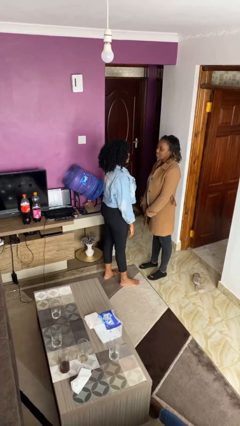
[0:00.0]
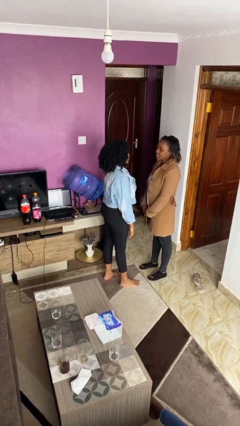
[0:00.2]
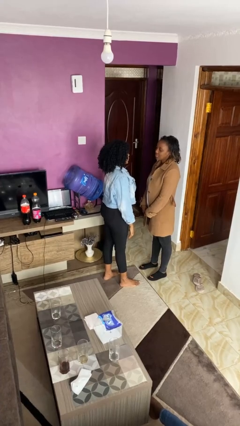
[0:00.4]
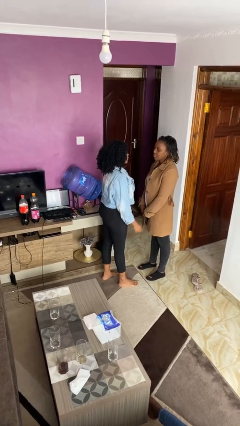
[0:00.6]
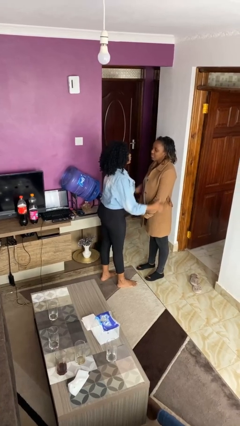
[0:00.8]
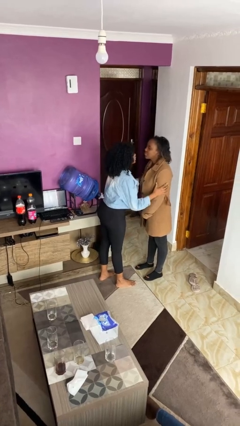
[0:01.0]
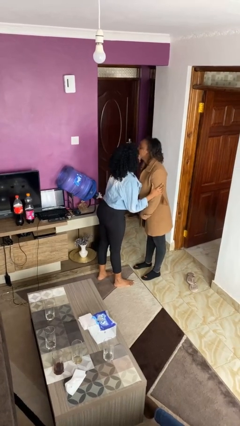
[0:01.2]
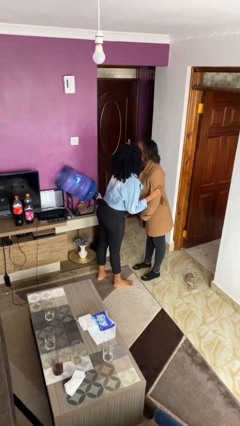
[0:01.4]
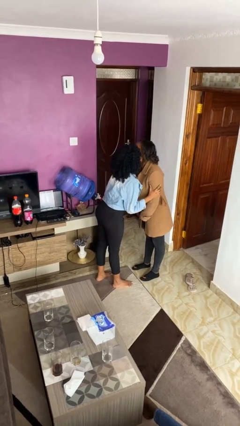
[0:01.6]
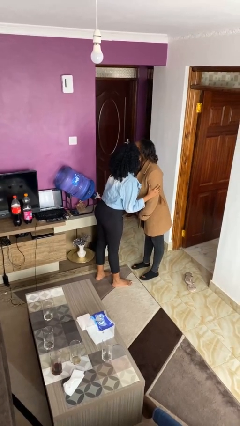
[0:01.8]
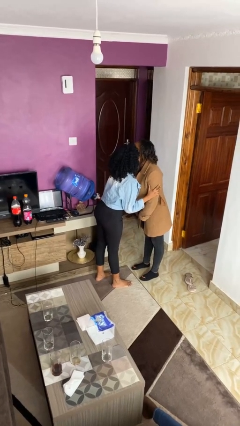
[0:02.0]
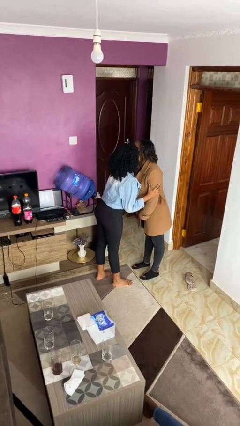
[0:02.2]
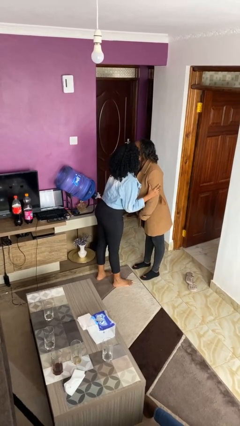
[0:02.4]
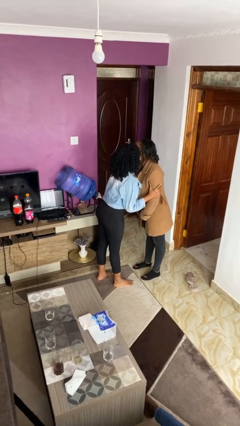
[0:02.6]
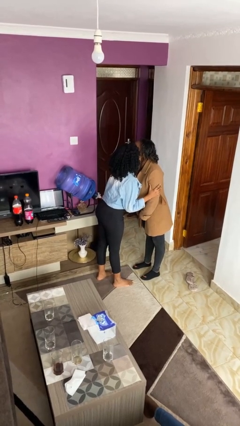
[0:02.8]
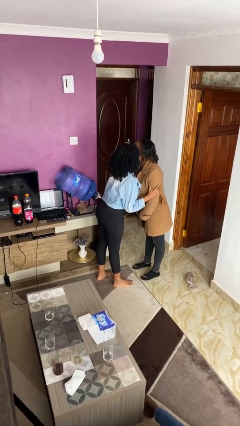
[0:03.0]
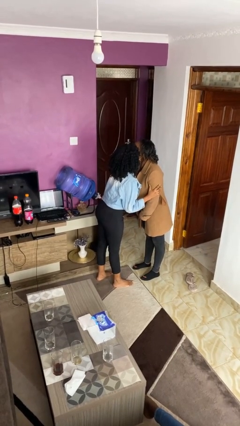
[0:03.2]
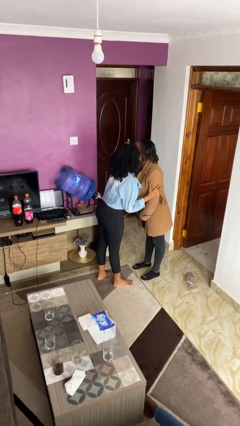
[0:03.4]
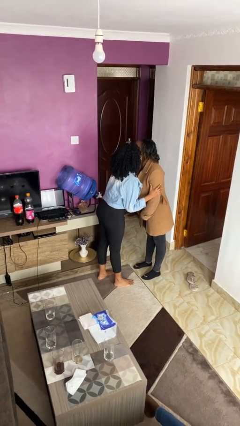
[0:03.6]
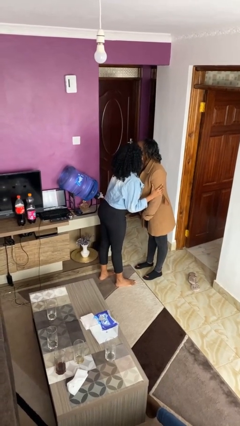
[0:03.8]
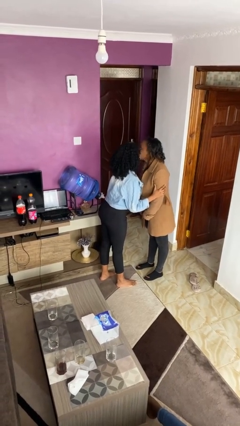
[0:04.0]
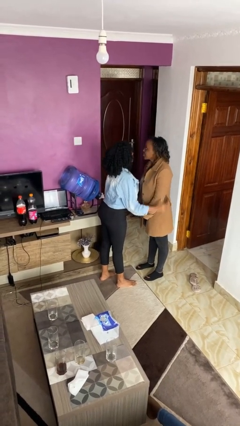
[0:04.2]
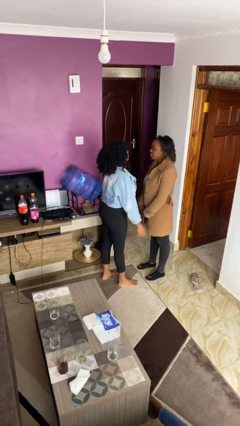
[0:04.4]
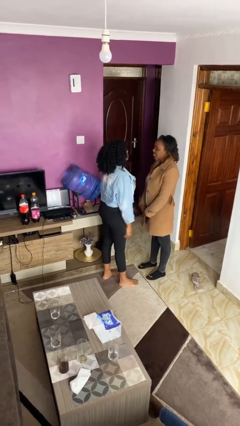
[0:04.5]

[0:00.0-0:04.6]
person kisses cheek of person

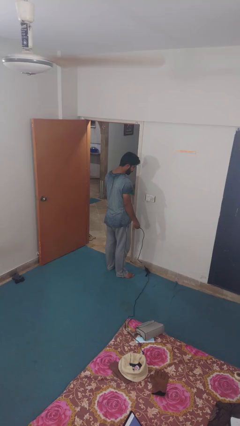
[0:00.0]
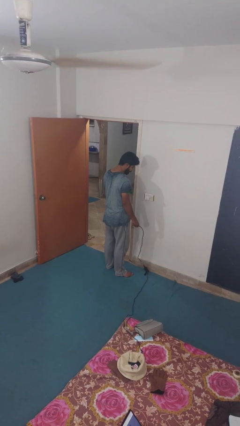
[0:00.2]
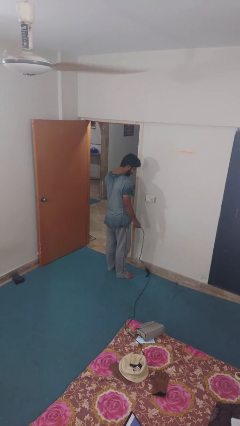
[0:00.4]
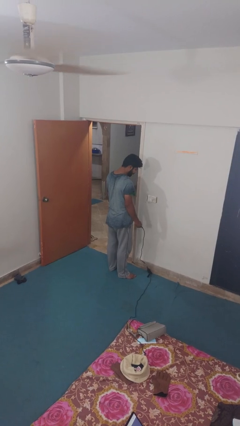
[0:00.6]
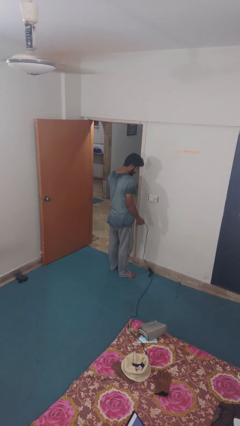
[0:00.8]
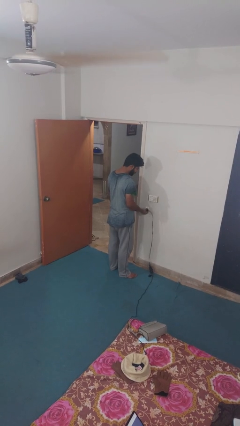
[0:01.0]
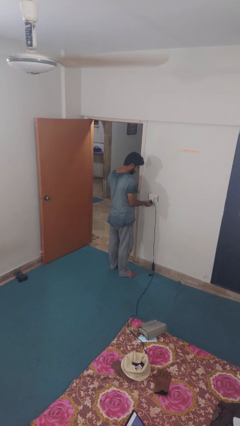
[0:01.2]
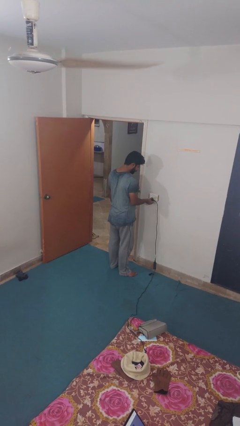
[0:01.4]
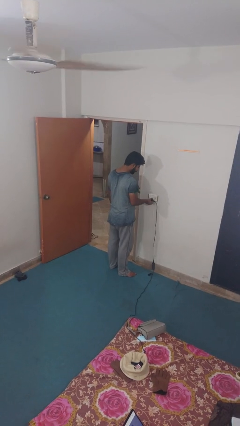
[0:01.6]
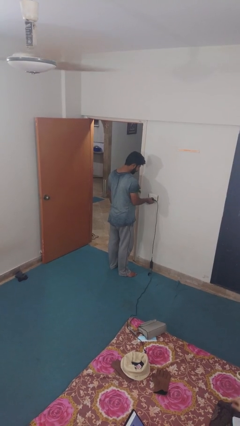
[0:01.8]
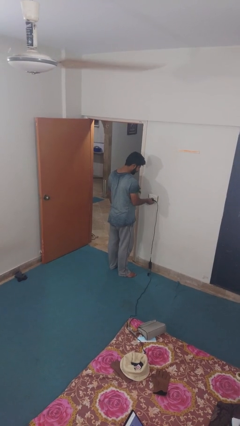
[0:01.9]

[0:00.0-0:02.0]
person plugs into electrical socket

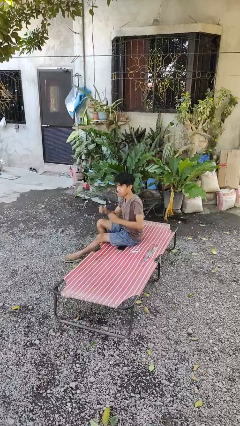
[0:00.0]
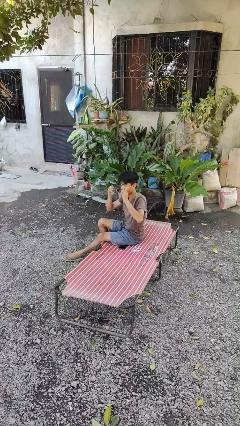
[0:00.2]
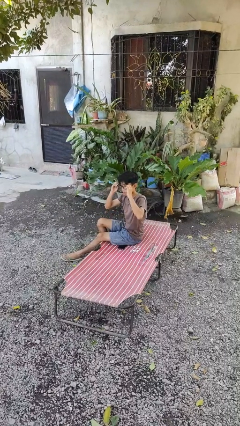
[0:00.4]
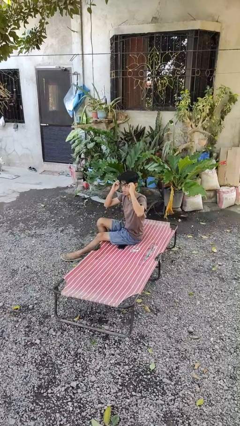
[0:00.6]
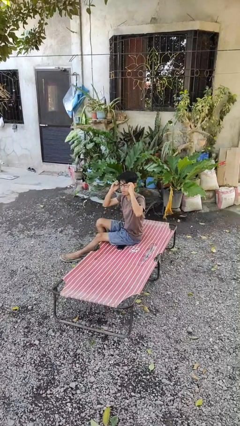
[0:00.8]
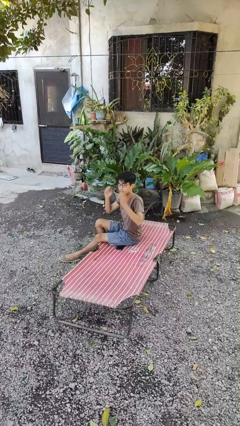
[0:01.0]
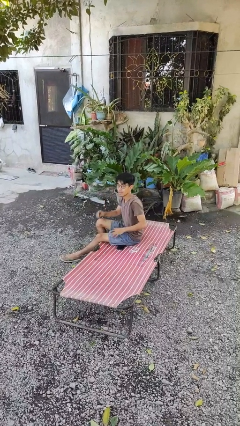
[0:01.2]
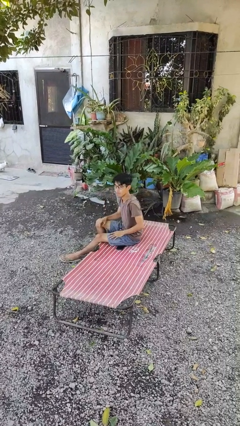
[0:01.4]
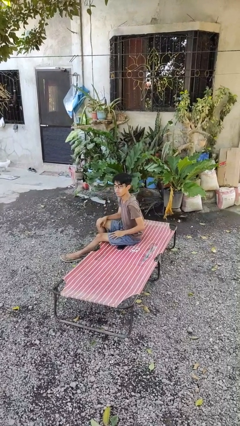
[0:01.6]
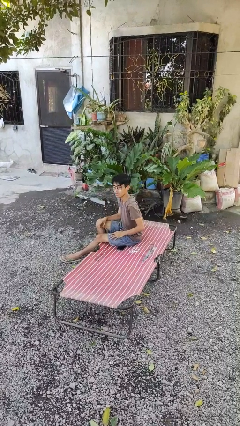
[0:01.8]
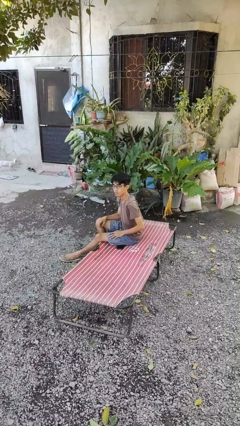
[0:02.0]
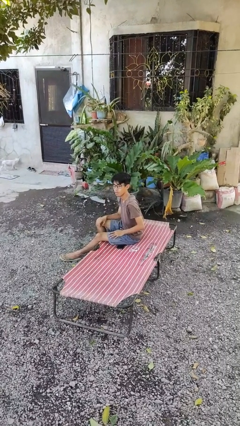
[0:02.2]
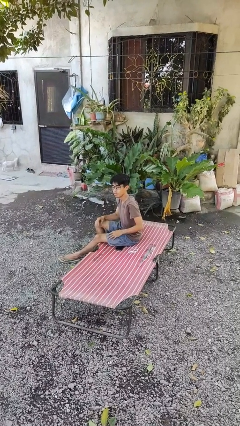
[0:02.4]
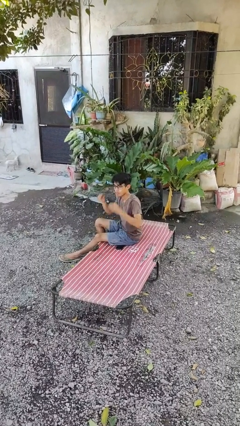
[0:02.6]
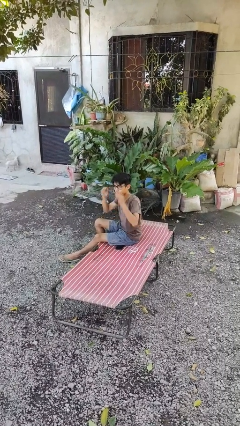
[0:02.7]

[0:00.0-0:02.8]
person puts on glasses

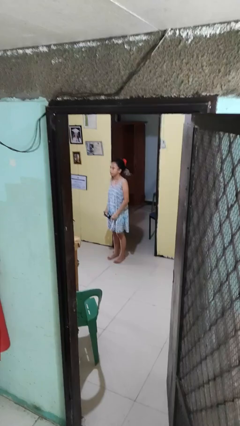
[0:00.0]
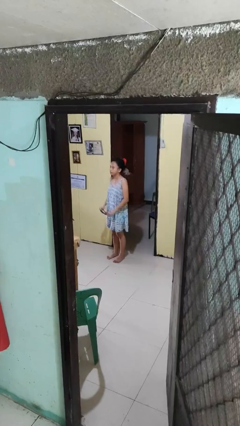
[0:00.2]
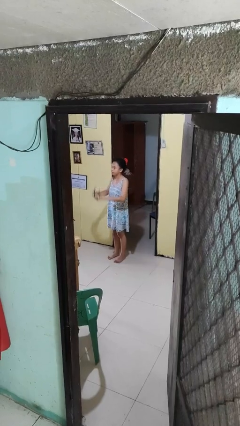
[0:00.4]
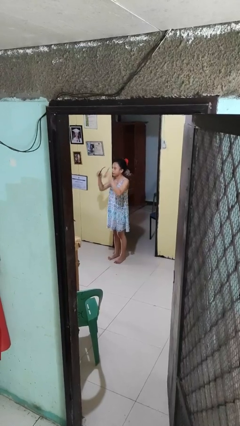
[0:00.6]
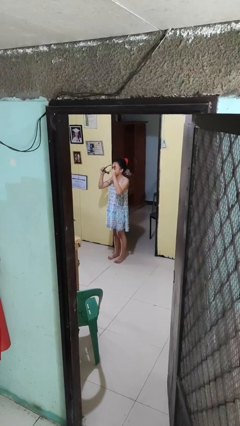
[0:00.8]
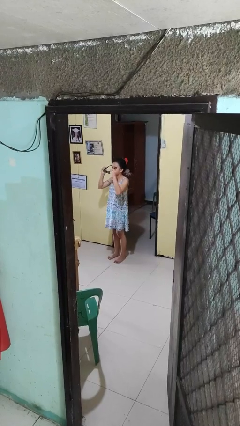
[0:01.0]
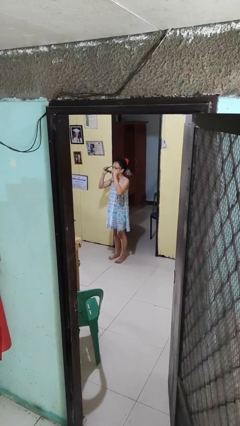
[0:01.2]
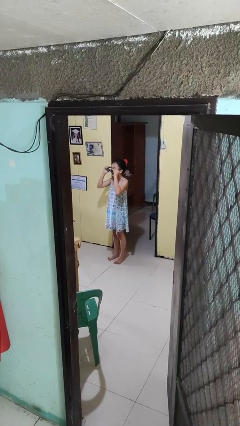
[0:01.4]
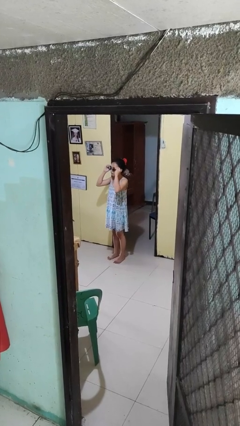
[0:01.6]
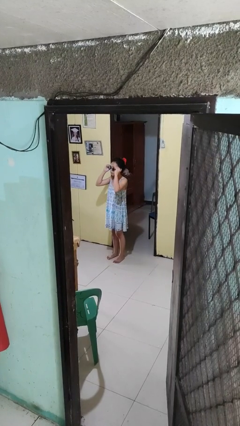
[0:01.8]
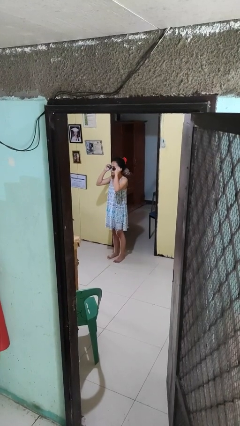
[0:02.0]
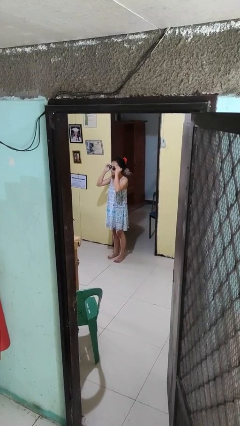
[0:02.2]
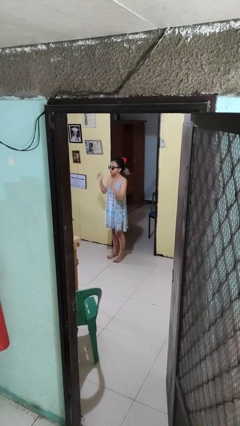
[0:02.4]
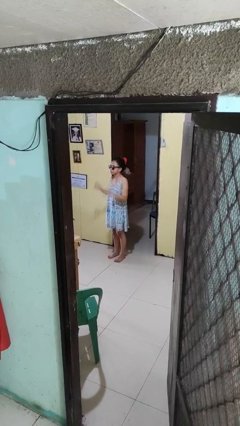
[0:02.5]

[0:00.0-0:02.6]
person puts on sunglasses

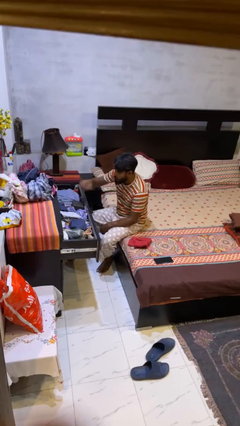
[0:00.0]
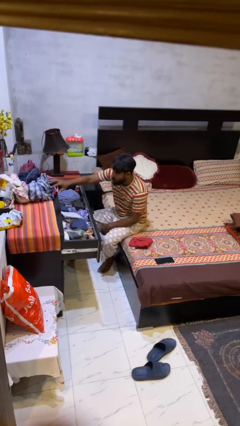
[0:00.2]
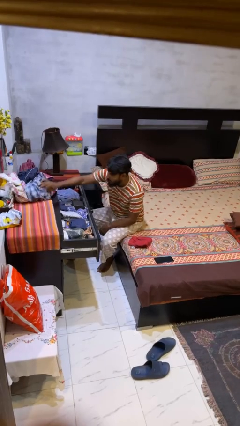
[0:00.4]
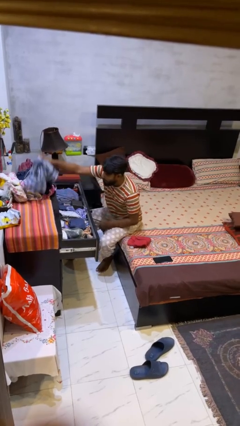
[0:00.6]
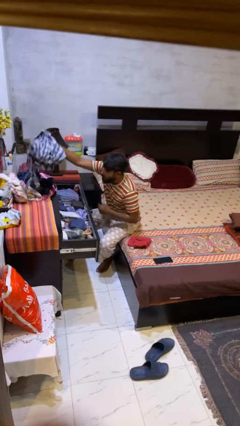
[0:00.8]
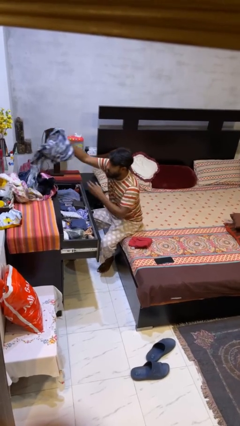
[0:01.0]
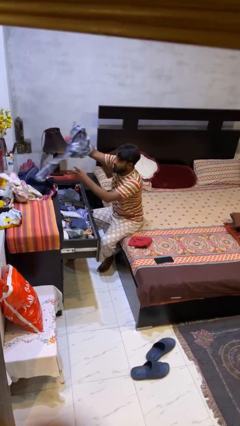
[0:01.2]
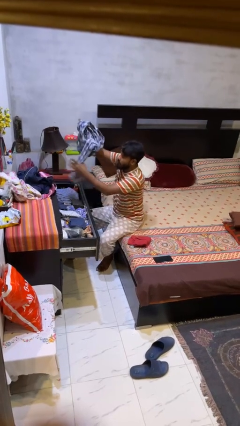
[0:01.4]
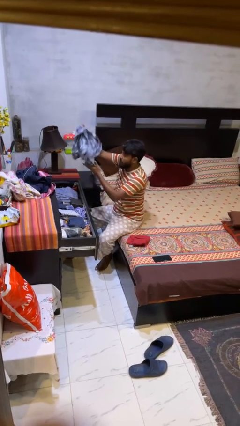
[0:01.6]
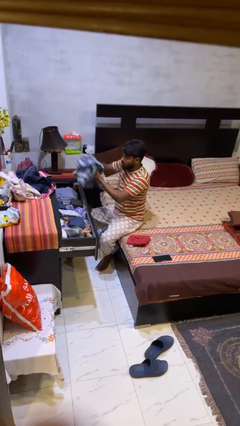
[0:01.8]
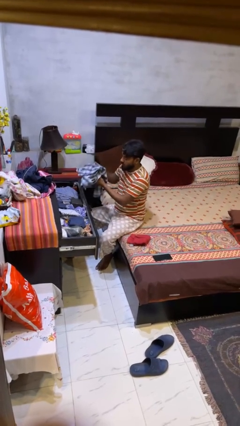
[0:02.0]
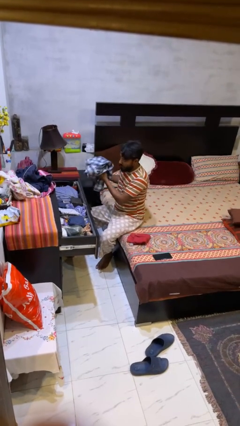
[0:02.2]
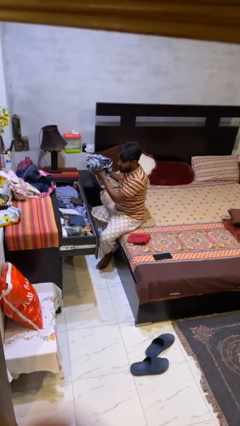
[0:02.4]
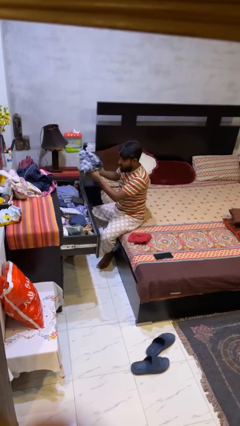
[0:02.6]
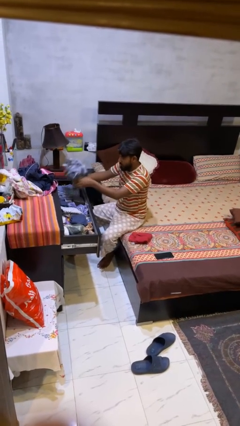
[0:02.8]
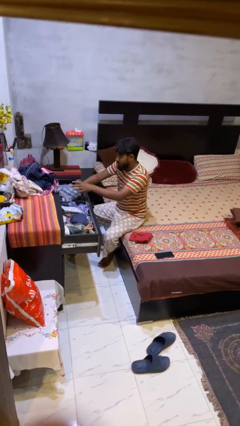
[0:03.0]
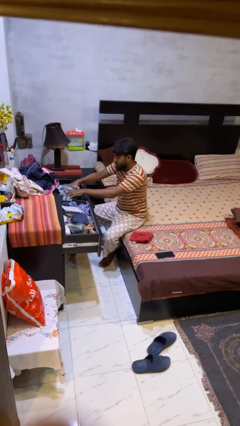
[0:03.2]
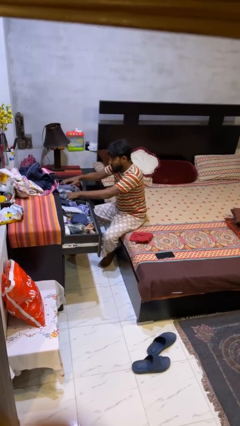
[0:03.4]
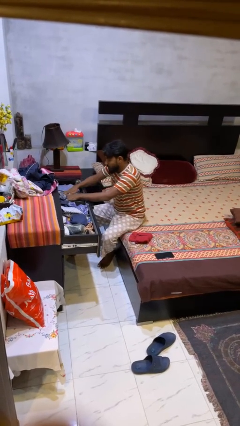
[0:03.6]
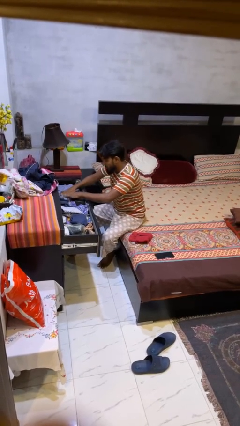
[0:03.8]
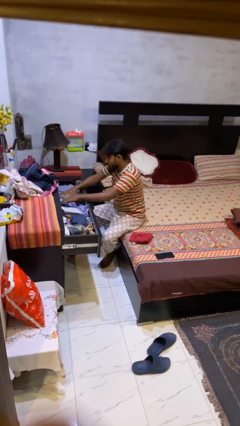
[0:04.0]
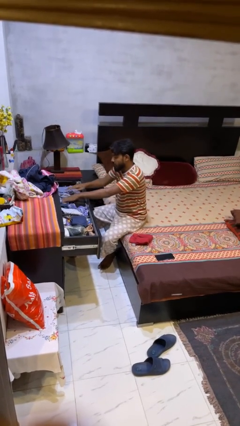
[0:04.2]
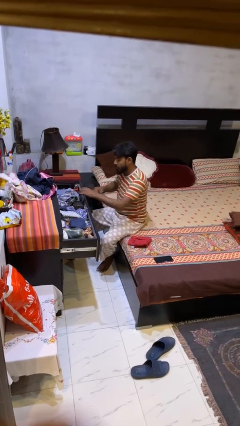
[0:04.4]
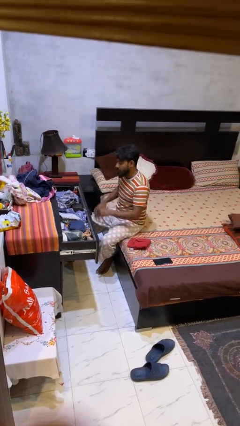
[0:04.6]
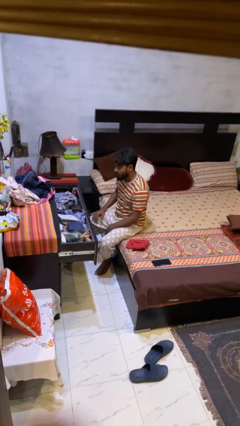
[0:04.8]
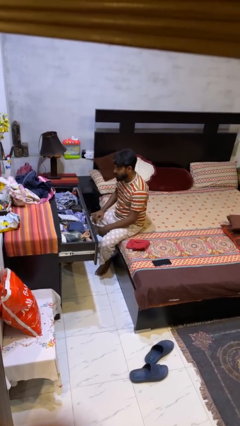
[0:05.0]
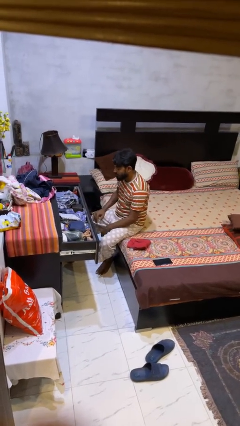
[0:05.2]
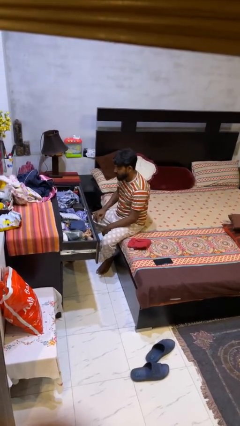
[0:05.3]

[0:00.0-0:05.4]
person puts clothes into dresser
